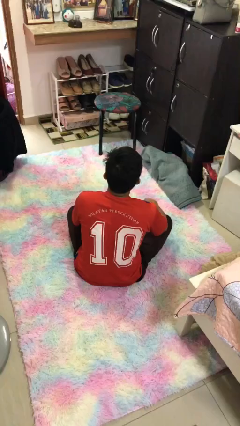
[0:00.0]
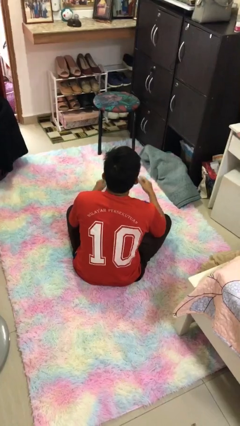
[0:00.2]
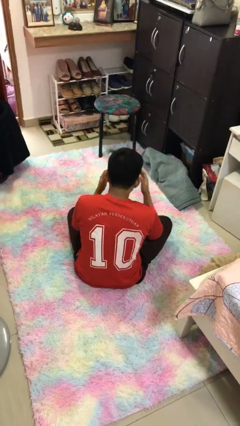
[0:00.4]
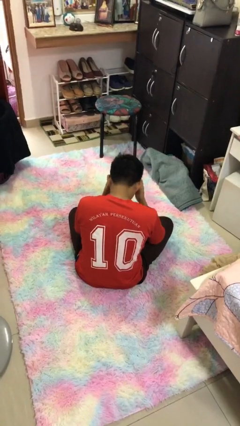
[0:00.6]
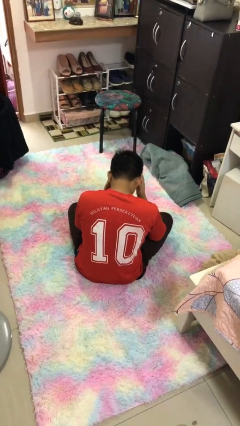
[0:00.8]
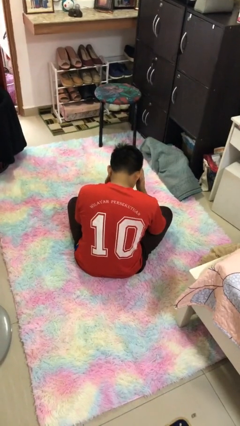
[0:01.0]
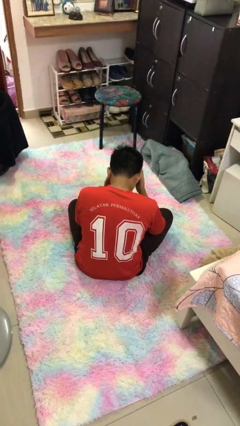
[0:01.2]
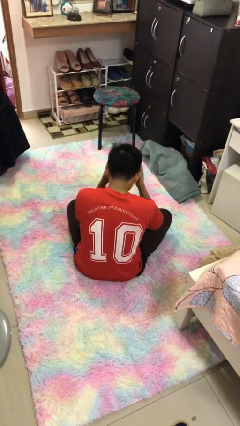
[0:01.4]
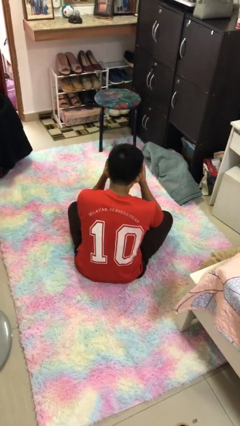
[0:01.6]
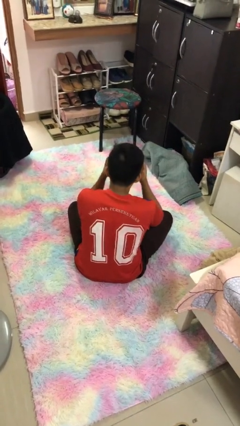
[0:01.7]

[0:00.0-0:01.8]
person covers face with hands

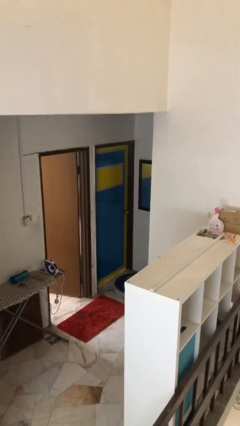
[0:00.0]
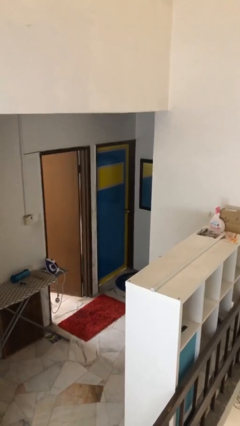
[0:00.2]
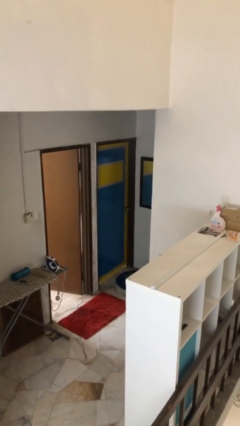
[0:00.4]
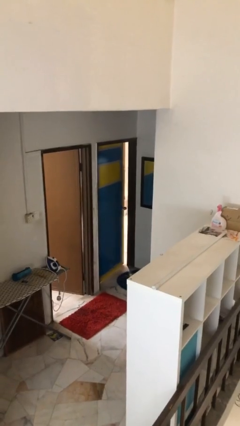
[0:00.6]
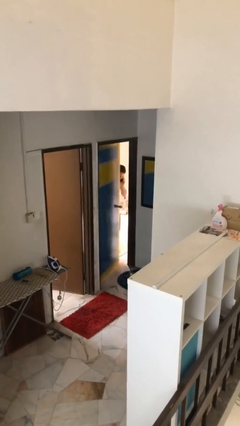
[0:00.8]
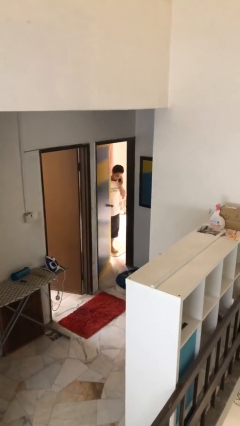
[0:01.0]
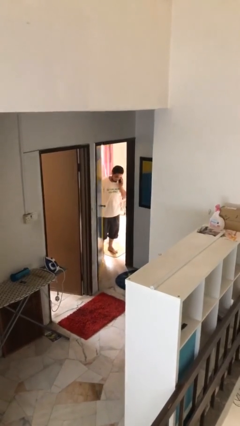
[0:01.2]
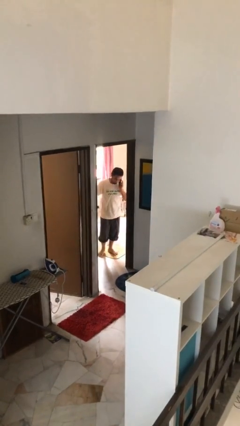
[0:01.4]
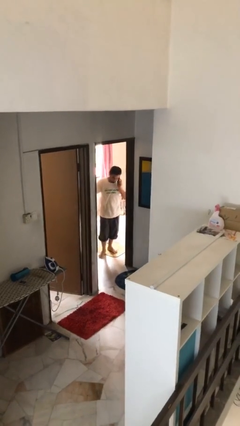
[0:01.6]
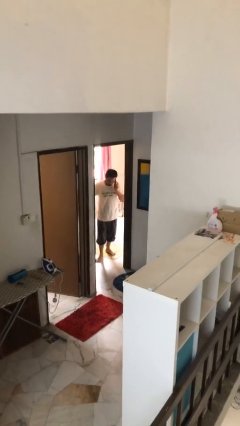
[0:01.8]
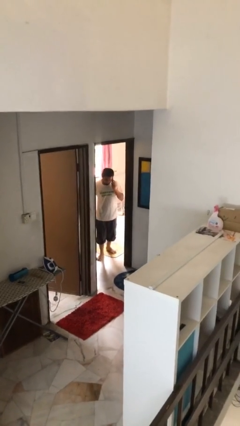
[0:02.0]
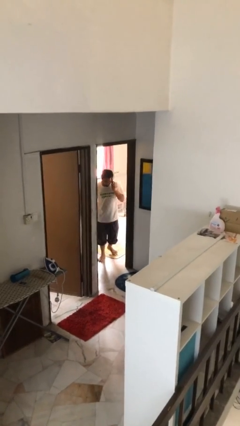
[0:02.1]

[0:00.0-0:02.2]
person opens facility door

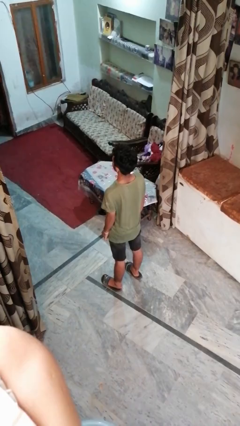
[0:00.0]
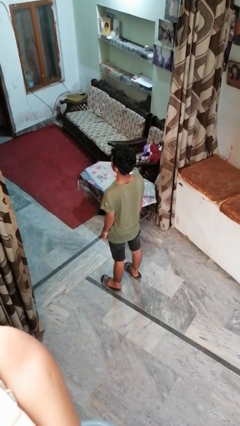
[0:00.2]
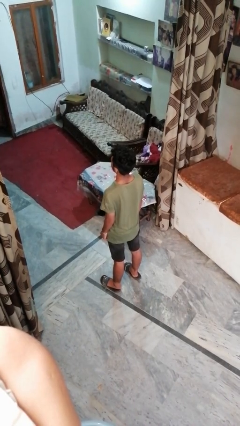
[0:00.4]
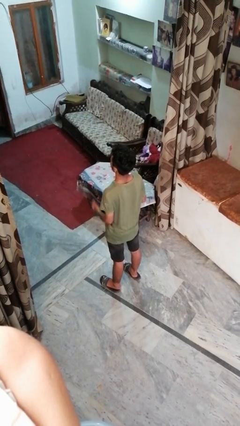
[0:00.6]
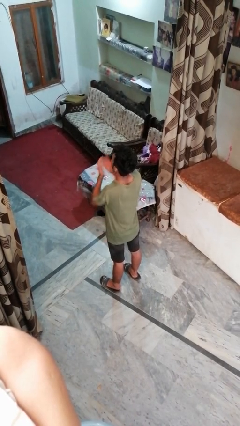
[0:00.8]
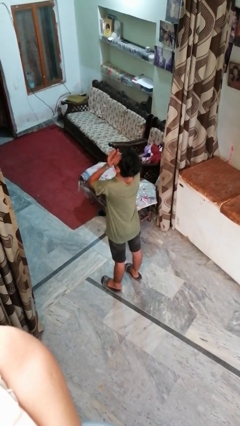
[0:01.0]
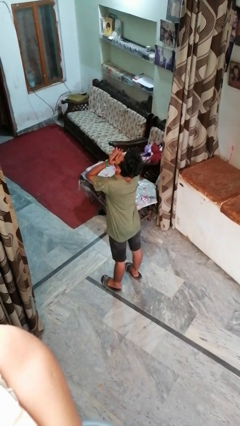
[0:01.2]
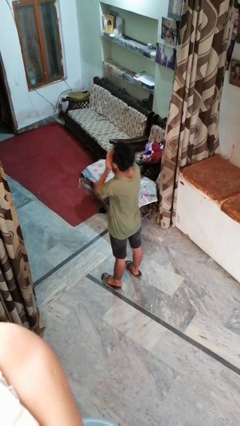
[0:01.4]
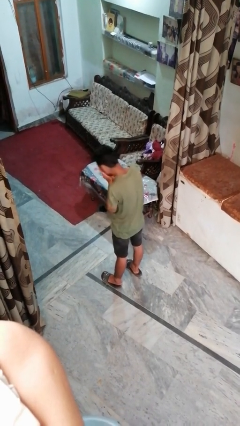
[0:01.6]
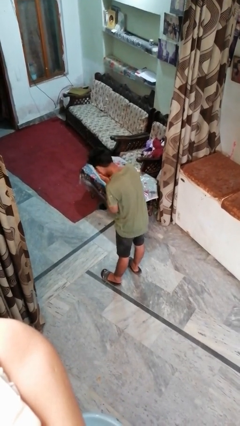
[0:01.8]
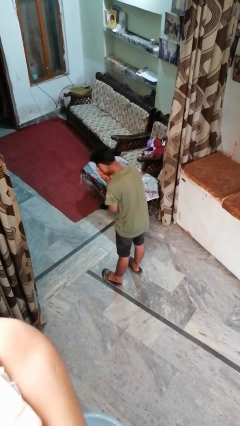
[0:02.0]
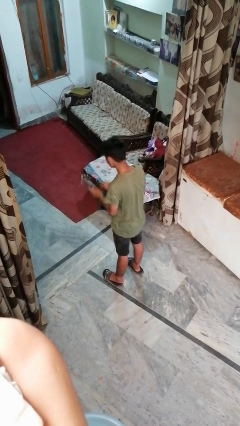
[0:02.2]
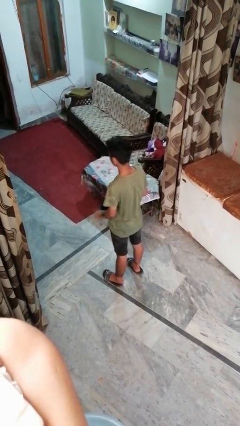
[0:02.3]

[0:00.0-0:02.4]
person sneezes into hand

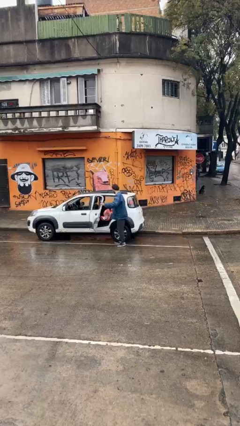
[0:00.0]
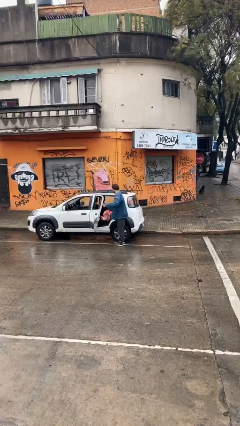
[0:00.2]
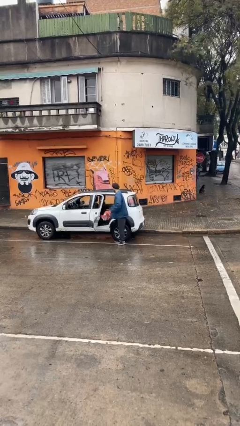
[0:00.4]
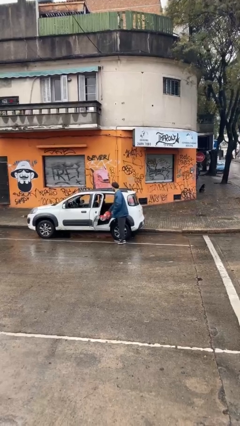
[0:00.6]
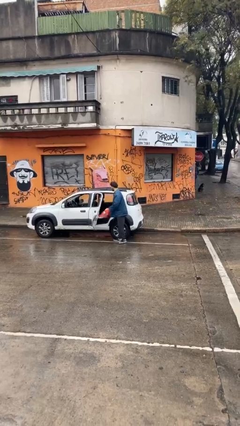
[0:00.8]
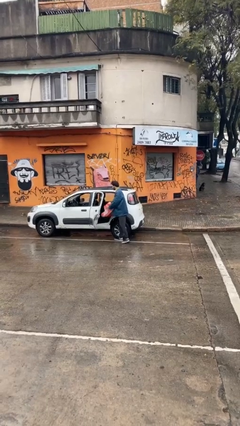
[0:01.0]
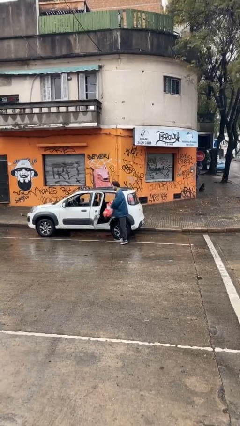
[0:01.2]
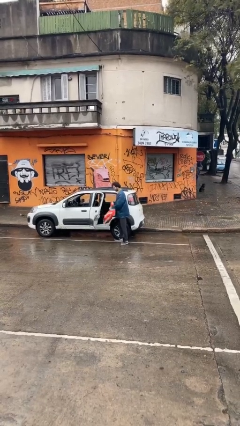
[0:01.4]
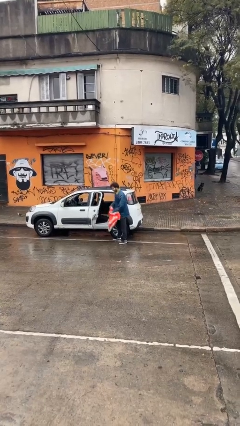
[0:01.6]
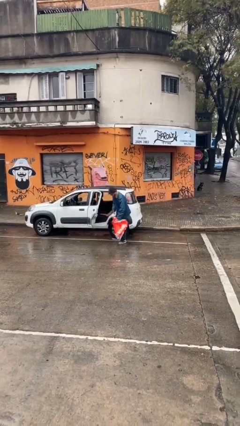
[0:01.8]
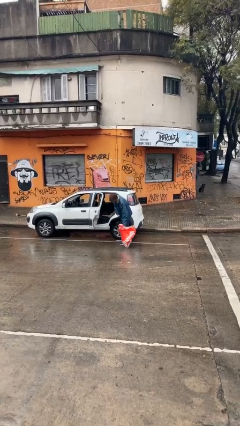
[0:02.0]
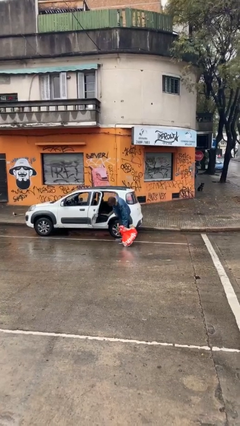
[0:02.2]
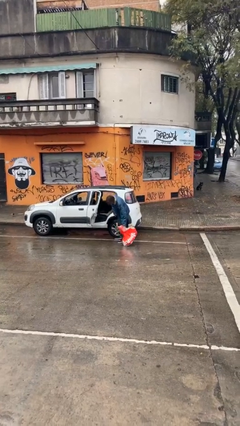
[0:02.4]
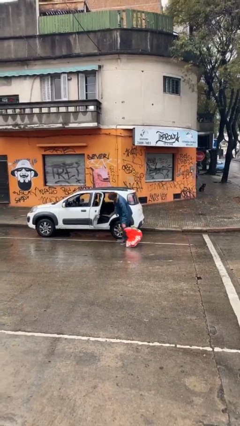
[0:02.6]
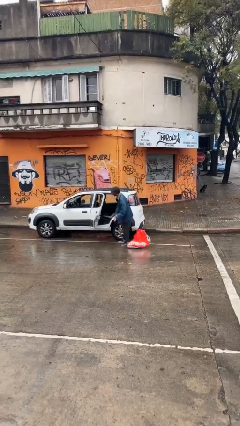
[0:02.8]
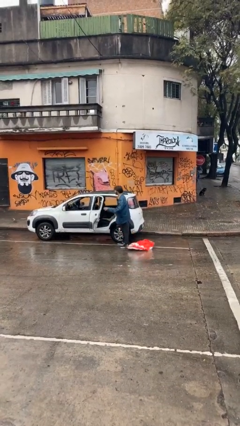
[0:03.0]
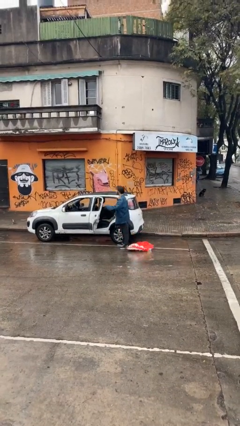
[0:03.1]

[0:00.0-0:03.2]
person unloads car

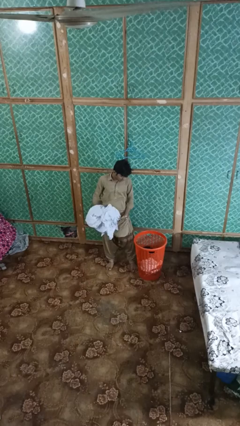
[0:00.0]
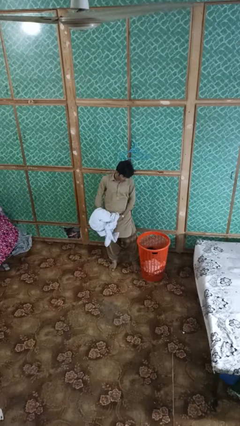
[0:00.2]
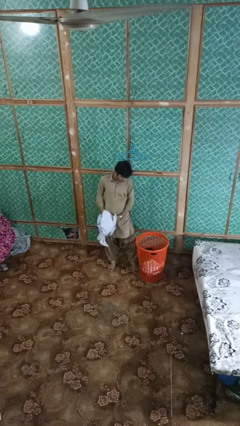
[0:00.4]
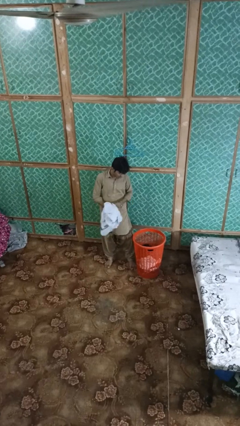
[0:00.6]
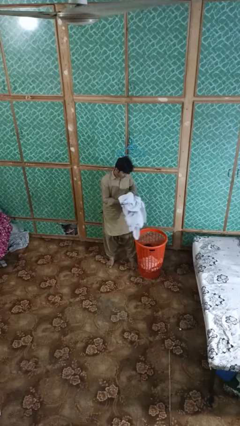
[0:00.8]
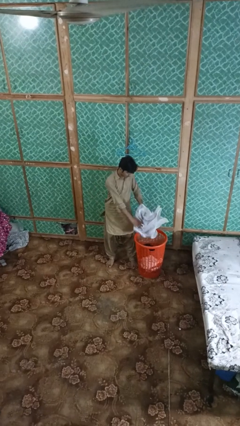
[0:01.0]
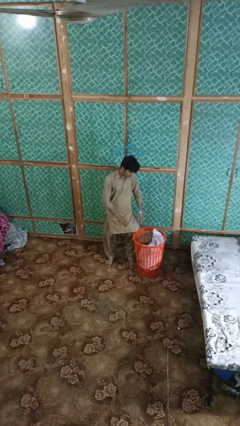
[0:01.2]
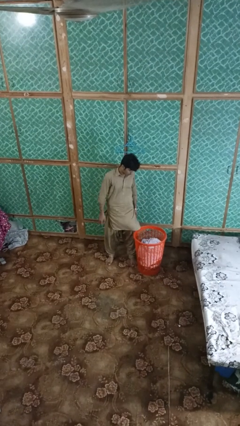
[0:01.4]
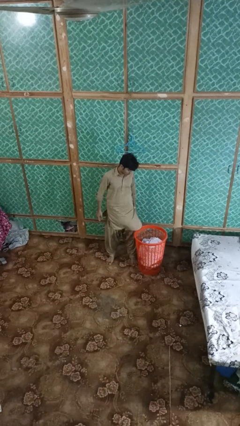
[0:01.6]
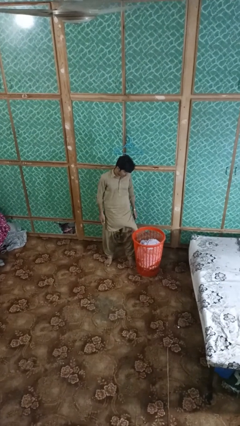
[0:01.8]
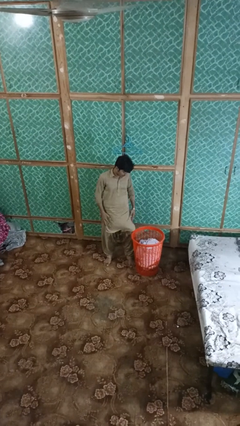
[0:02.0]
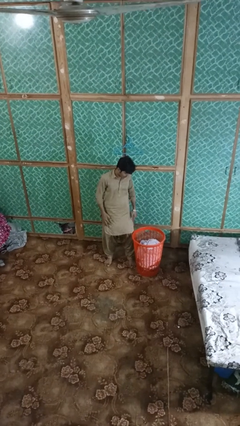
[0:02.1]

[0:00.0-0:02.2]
person puts object into basket

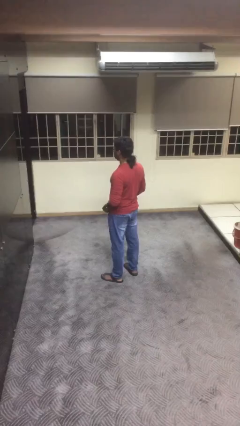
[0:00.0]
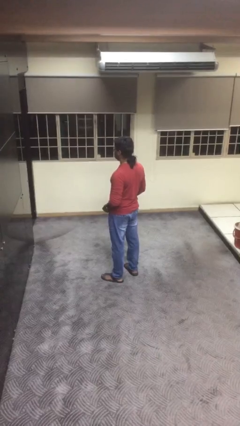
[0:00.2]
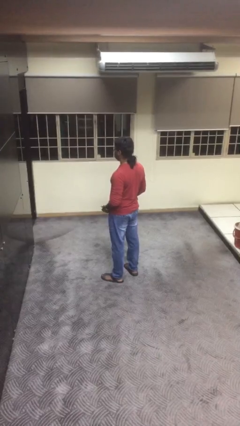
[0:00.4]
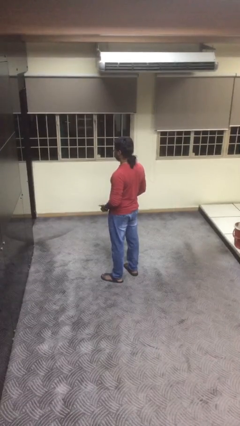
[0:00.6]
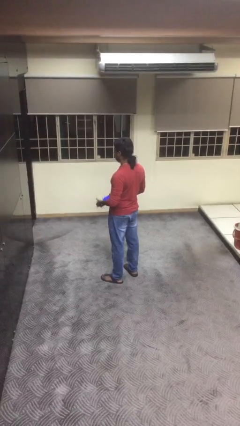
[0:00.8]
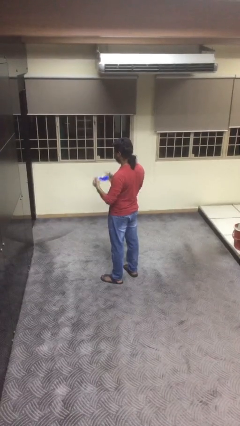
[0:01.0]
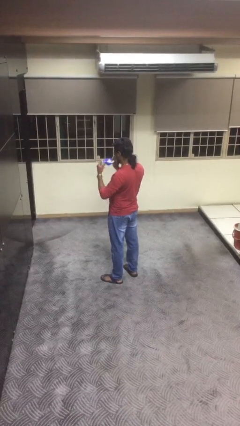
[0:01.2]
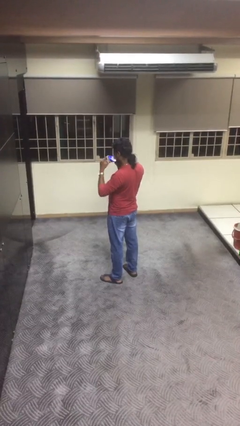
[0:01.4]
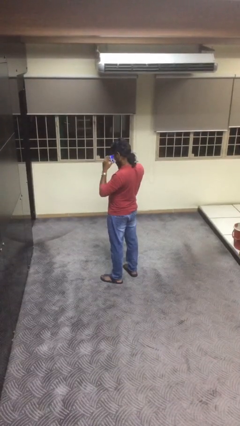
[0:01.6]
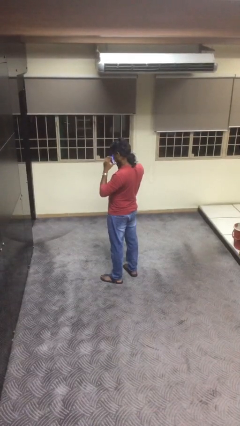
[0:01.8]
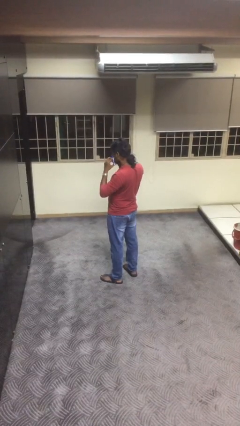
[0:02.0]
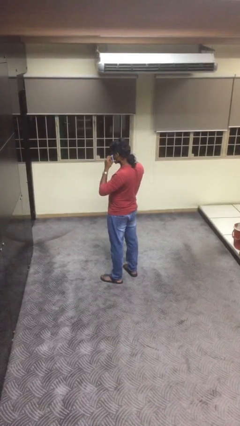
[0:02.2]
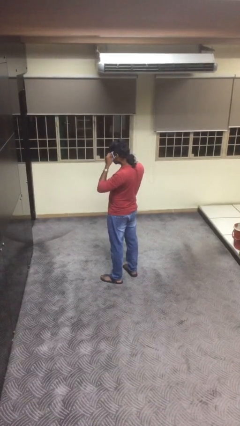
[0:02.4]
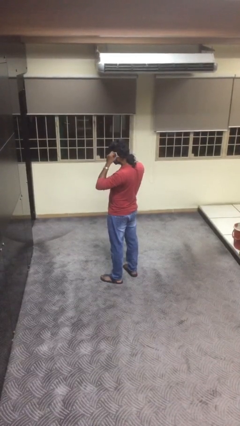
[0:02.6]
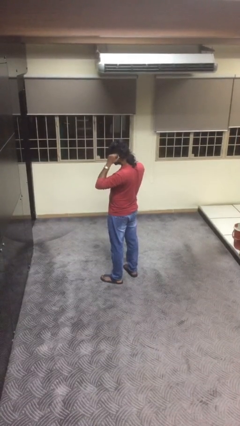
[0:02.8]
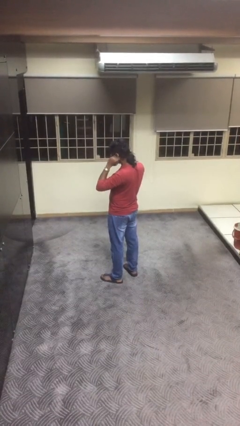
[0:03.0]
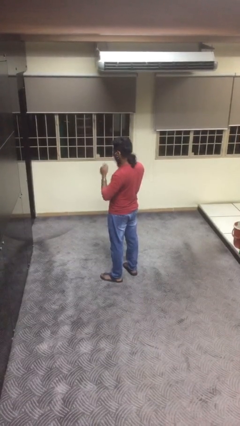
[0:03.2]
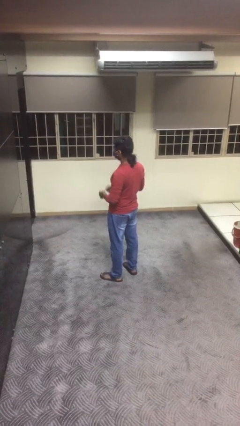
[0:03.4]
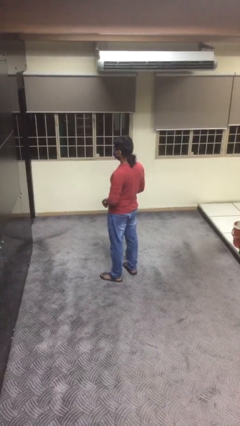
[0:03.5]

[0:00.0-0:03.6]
person puts on facemask

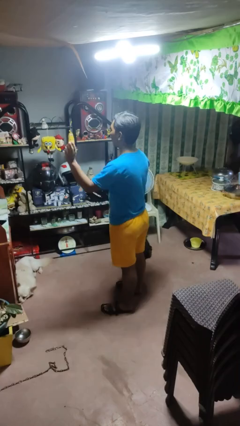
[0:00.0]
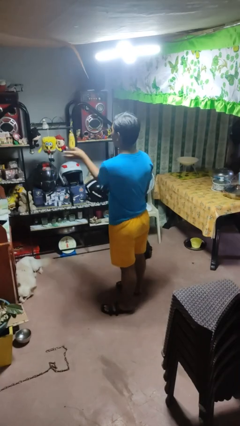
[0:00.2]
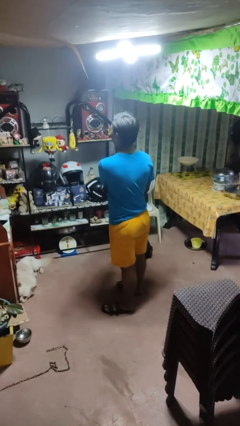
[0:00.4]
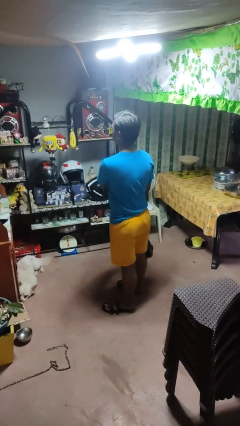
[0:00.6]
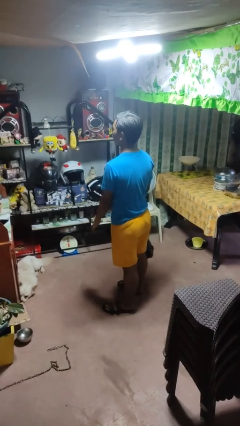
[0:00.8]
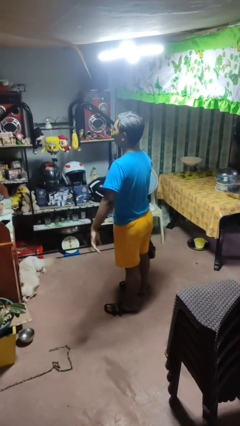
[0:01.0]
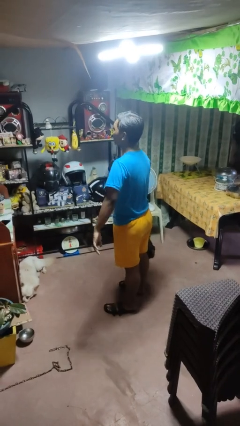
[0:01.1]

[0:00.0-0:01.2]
person gestures swipe right

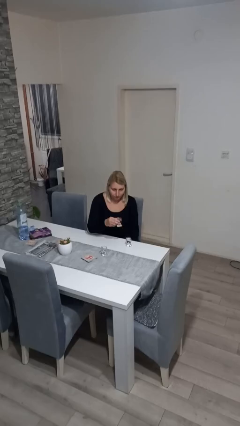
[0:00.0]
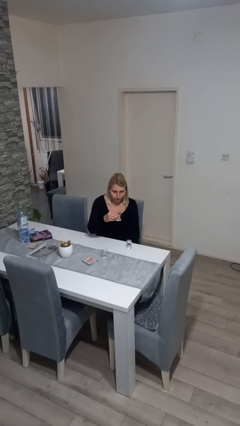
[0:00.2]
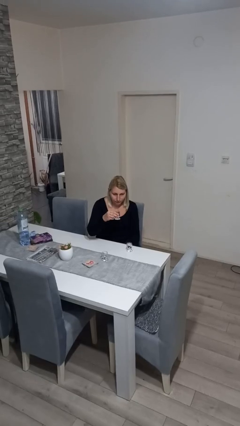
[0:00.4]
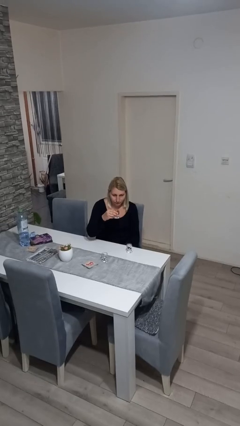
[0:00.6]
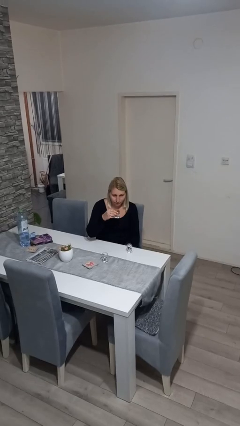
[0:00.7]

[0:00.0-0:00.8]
person picks up object from table
